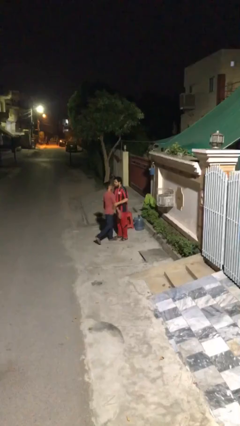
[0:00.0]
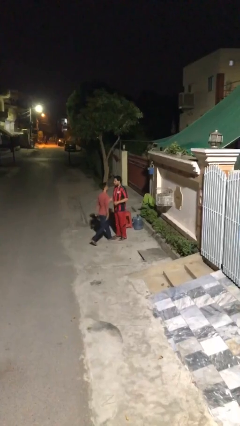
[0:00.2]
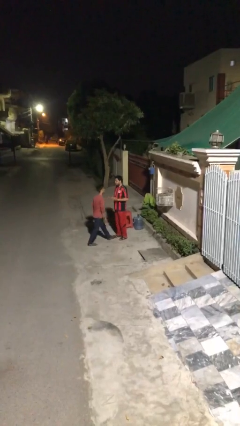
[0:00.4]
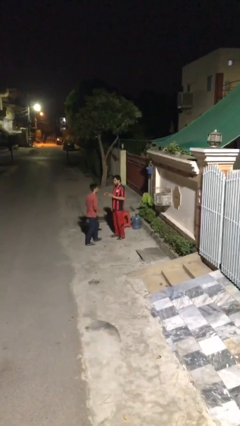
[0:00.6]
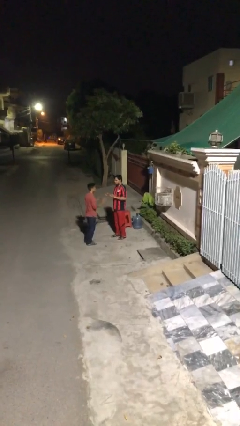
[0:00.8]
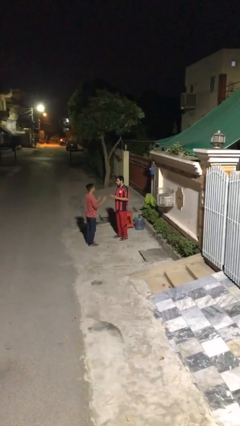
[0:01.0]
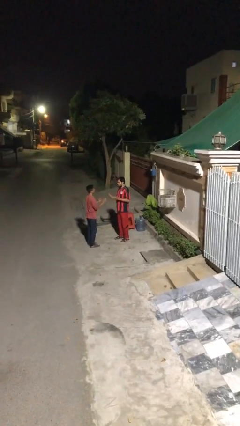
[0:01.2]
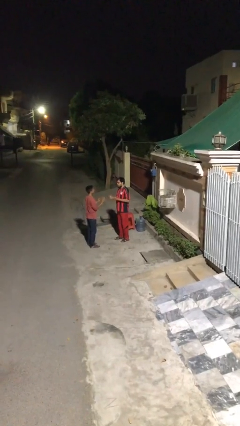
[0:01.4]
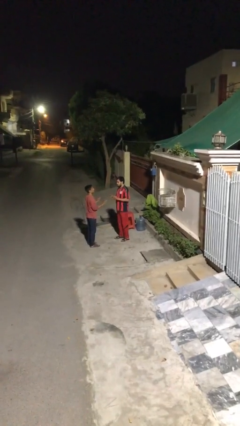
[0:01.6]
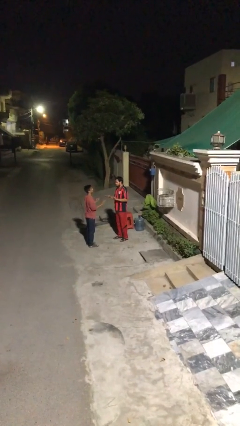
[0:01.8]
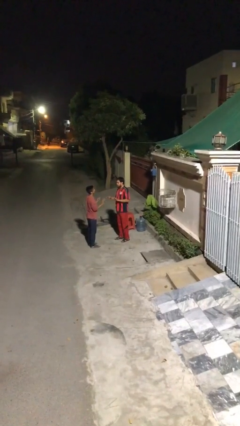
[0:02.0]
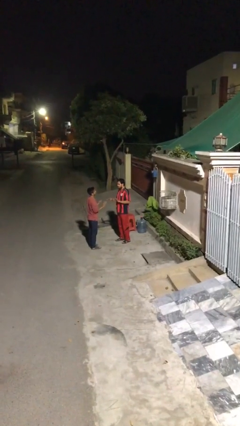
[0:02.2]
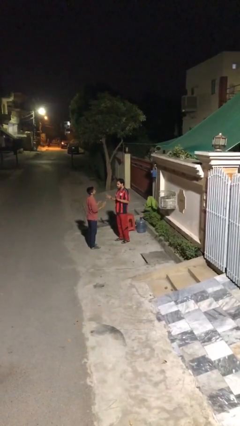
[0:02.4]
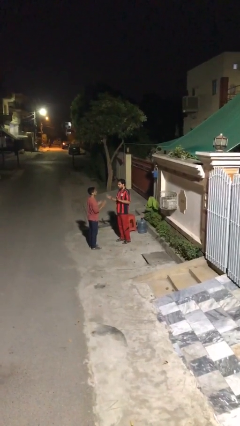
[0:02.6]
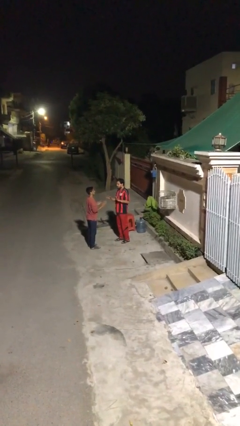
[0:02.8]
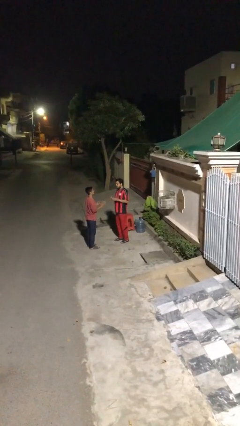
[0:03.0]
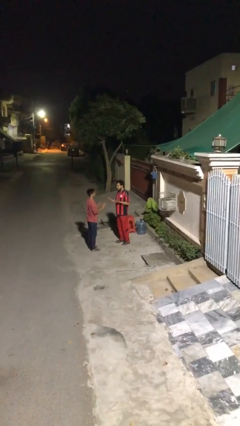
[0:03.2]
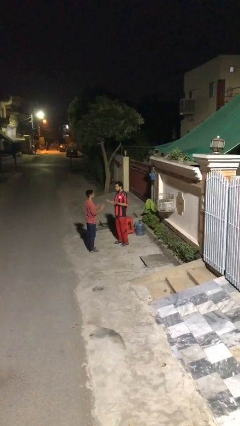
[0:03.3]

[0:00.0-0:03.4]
person talks to person

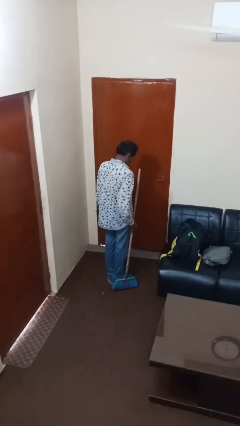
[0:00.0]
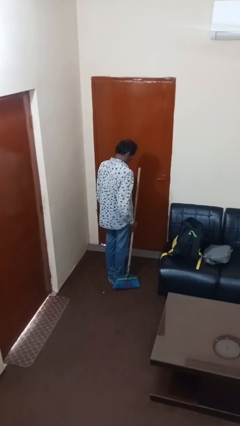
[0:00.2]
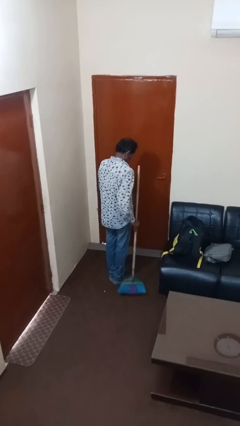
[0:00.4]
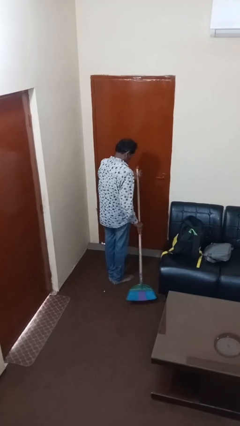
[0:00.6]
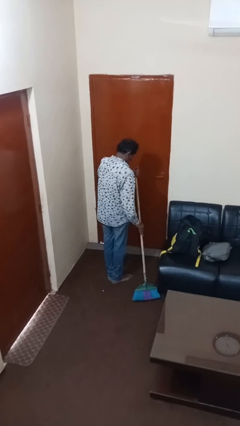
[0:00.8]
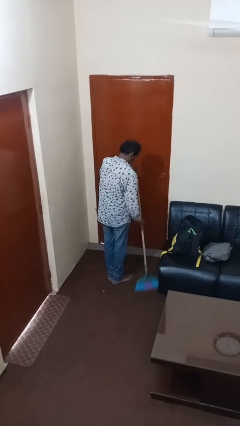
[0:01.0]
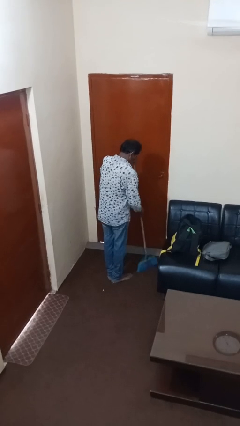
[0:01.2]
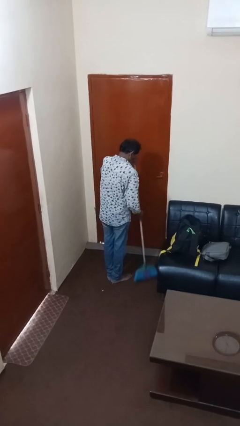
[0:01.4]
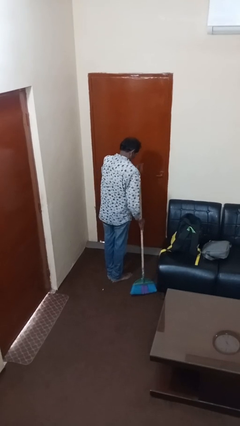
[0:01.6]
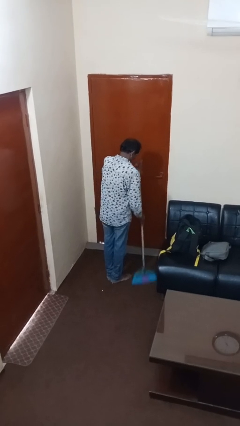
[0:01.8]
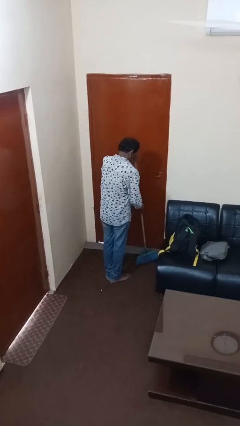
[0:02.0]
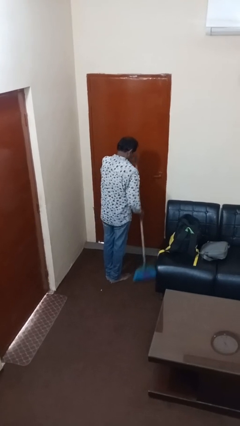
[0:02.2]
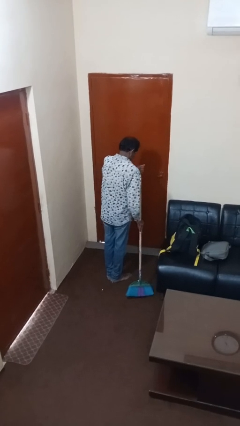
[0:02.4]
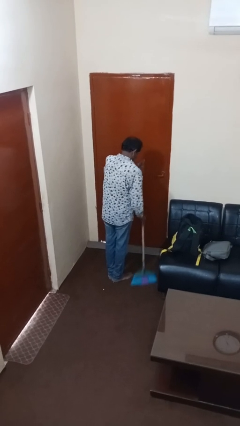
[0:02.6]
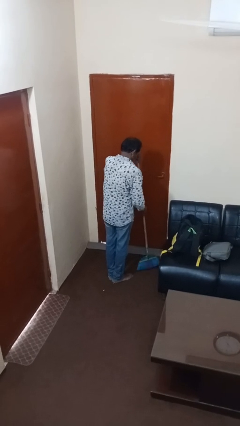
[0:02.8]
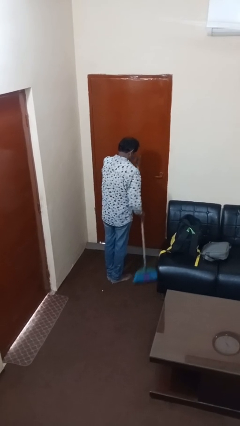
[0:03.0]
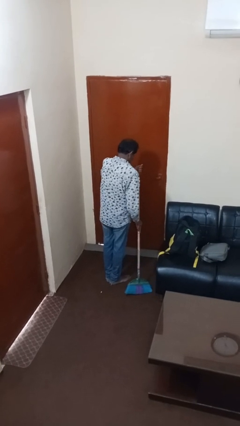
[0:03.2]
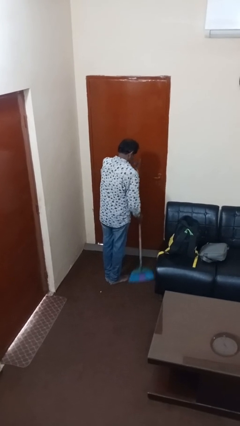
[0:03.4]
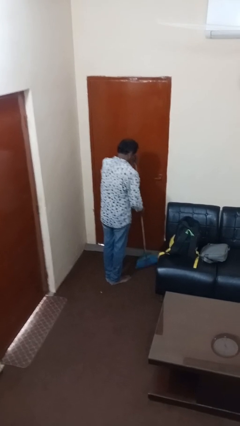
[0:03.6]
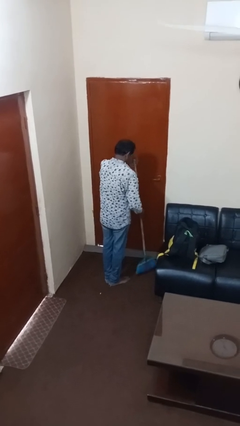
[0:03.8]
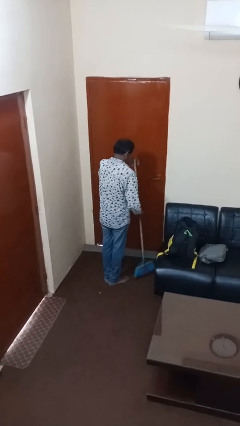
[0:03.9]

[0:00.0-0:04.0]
person sweeps floor

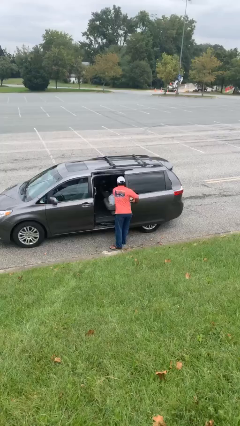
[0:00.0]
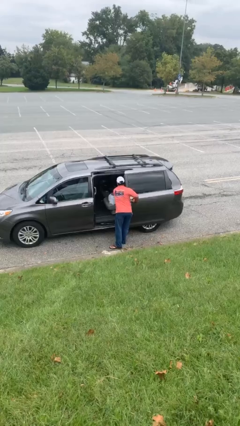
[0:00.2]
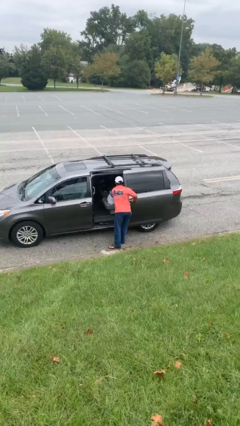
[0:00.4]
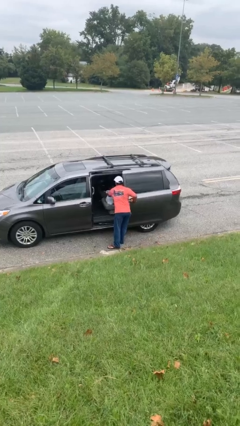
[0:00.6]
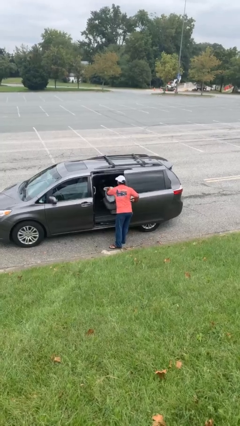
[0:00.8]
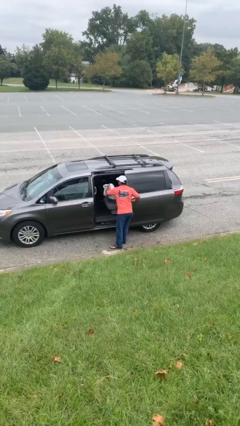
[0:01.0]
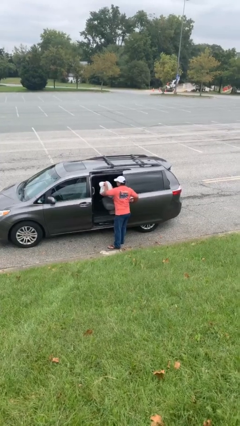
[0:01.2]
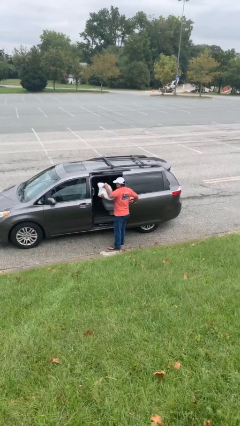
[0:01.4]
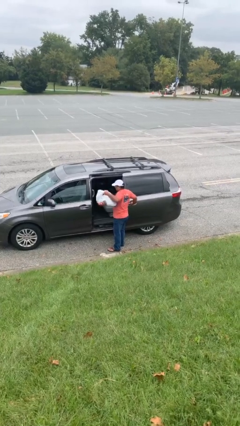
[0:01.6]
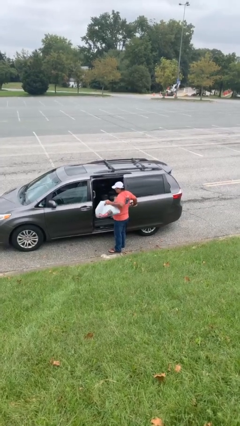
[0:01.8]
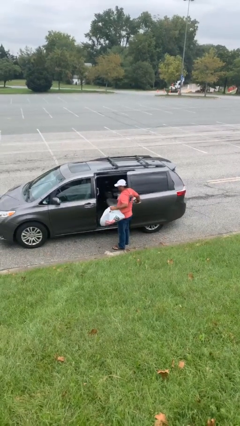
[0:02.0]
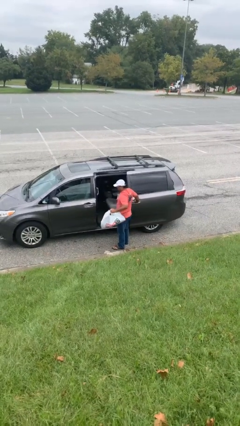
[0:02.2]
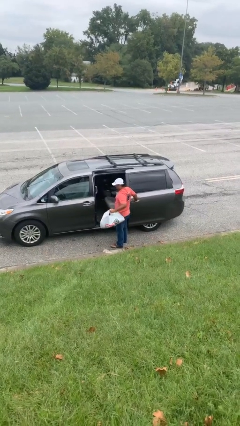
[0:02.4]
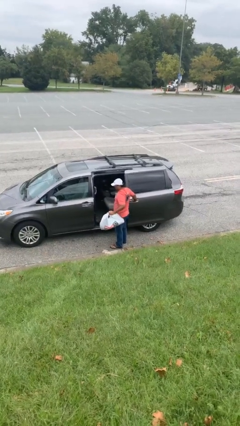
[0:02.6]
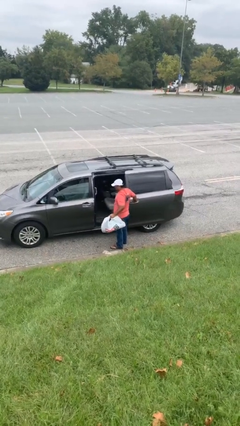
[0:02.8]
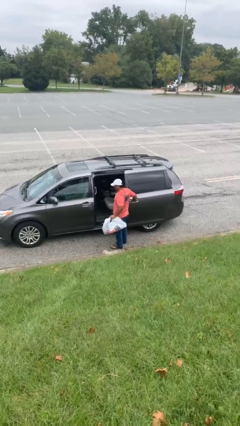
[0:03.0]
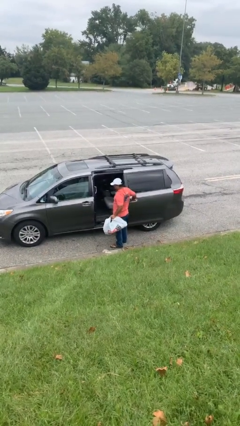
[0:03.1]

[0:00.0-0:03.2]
person unloads car

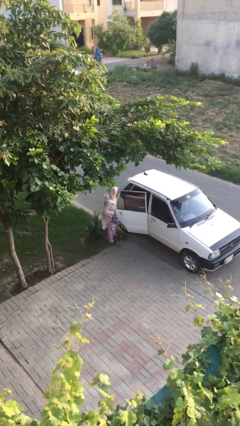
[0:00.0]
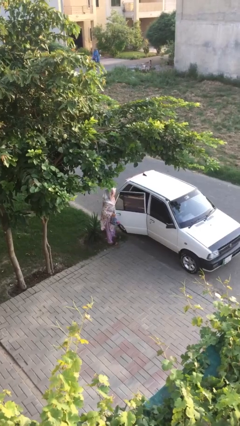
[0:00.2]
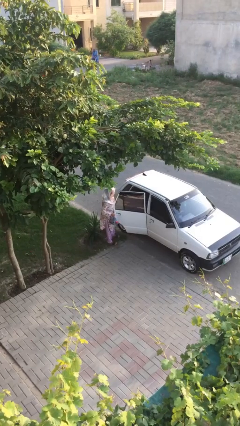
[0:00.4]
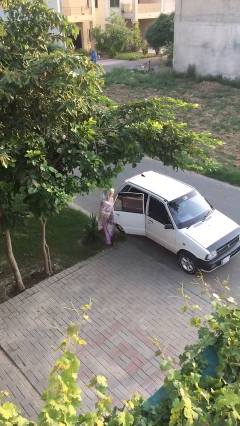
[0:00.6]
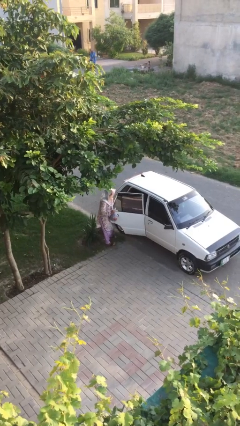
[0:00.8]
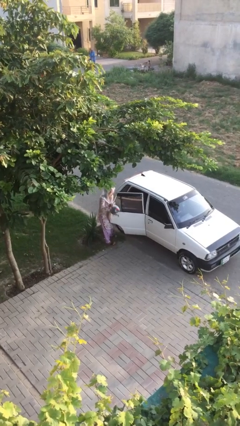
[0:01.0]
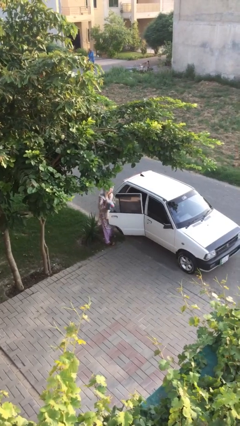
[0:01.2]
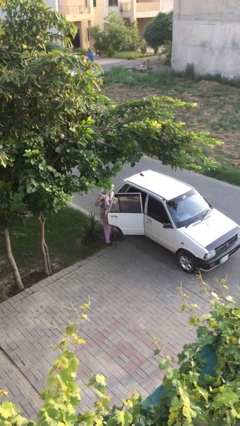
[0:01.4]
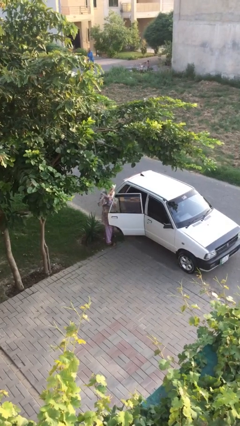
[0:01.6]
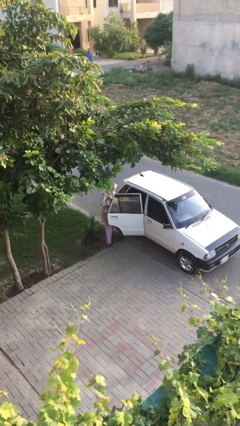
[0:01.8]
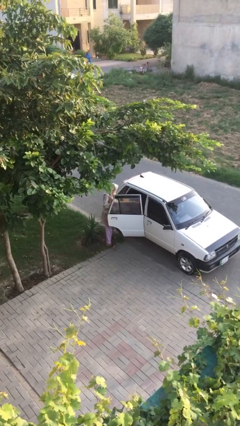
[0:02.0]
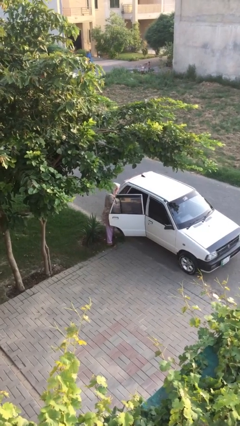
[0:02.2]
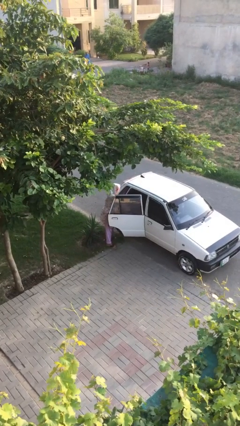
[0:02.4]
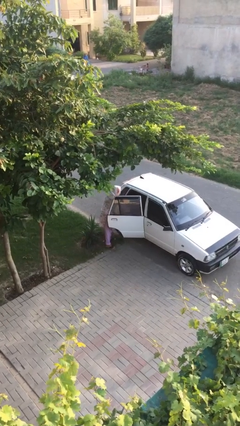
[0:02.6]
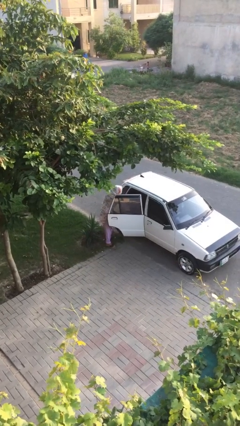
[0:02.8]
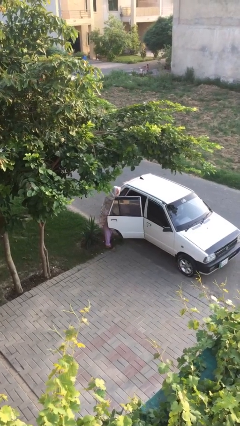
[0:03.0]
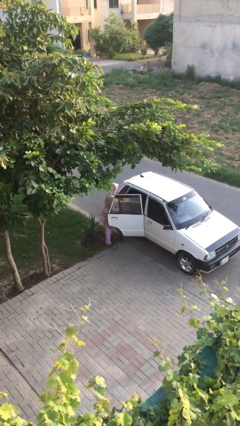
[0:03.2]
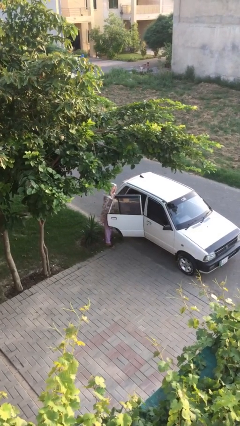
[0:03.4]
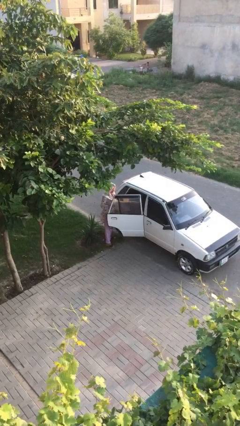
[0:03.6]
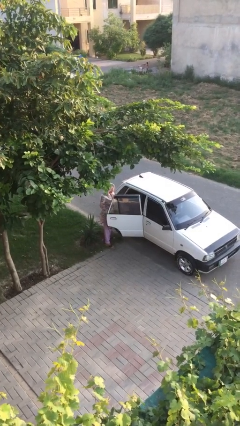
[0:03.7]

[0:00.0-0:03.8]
person loads car

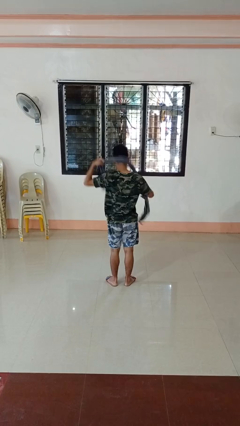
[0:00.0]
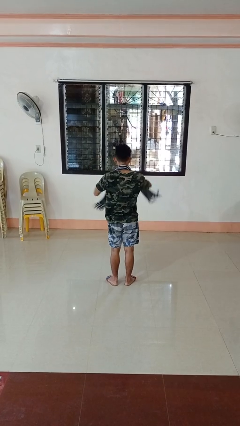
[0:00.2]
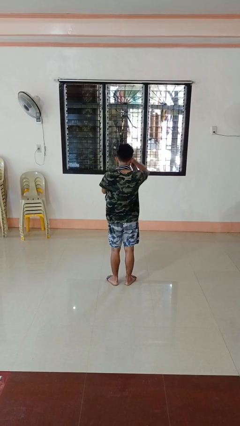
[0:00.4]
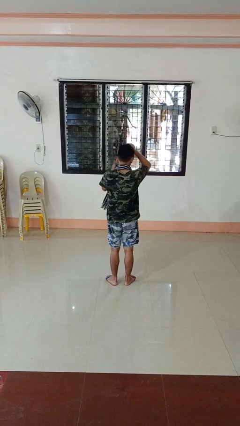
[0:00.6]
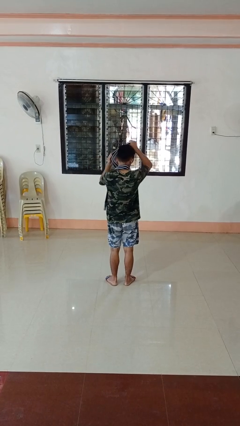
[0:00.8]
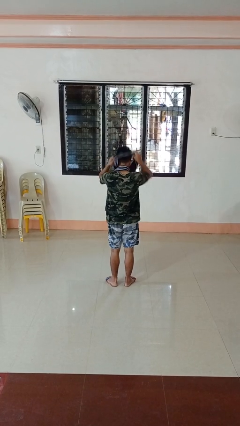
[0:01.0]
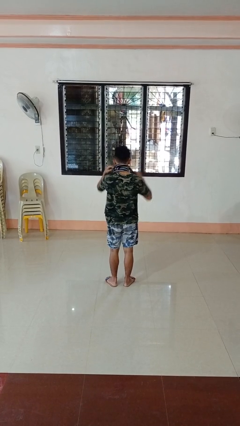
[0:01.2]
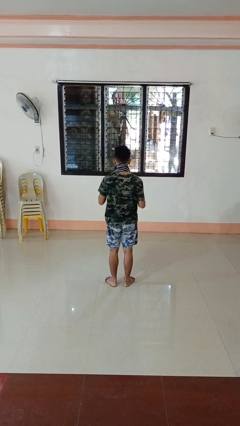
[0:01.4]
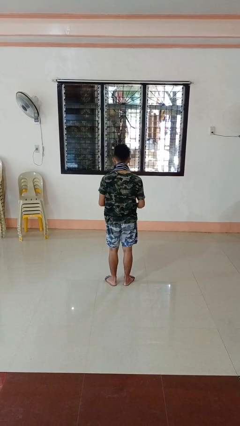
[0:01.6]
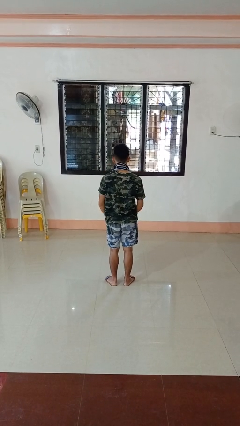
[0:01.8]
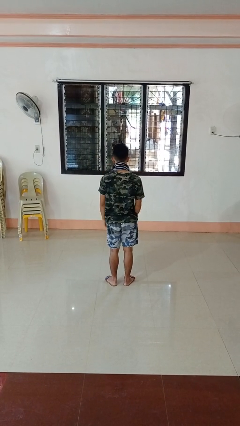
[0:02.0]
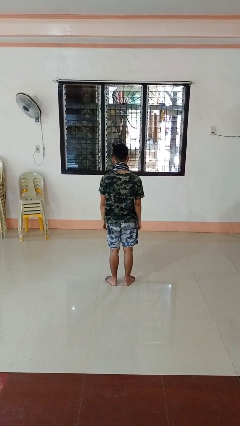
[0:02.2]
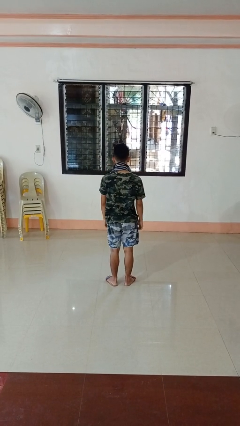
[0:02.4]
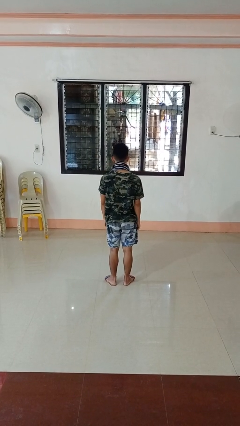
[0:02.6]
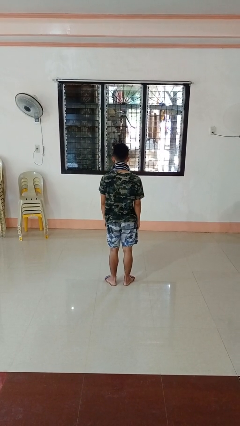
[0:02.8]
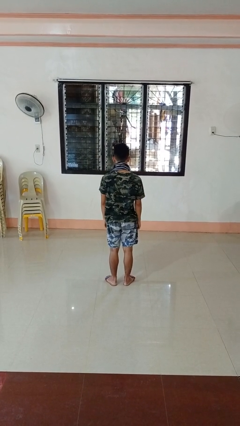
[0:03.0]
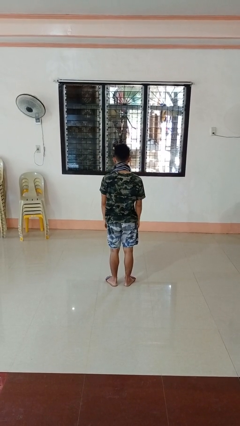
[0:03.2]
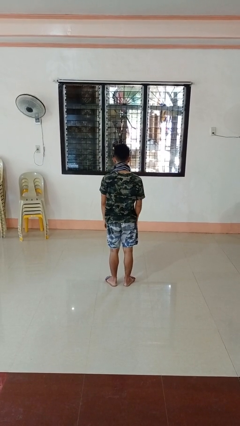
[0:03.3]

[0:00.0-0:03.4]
person puts on scarf
